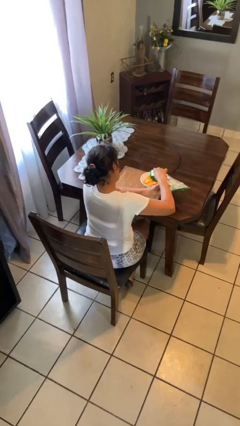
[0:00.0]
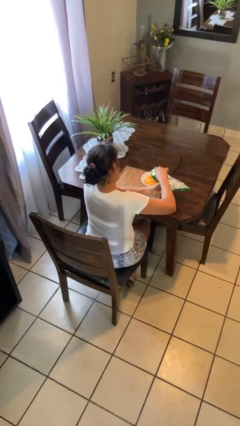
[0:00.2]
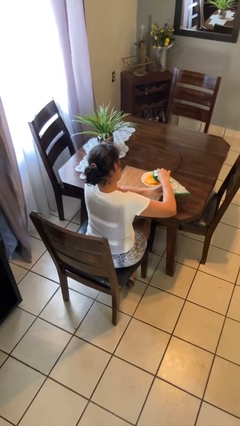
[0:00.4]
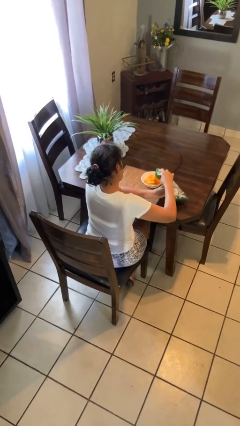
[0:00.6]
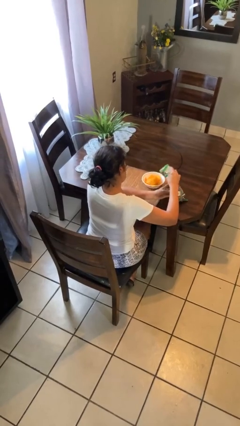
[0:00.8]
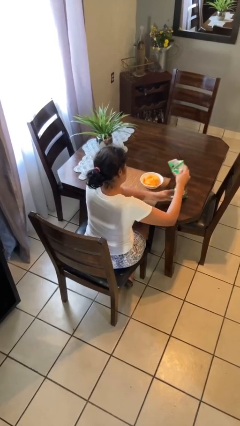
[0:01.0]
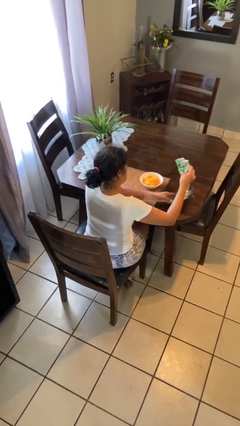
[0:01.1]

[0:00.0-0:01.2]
person pours into bowl

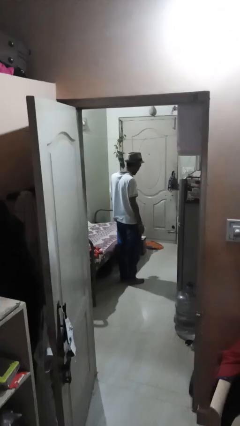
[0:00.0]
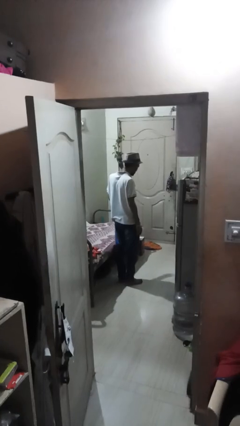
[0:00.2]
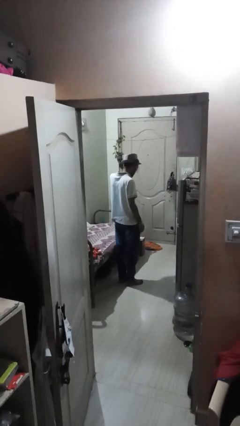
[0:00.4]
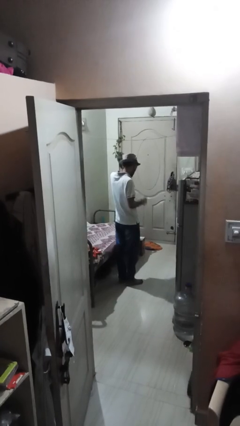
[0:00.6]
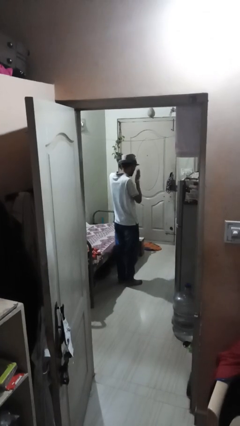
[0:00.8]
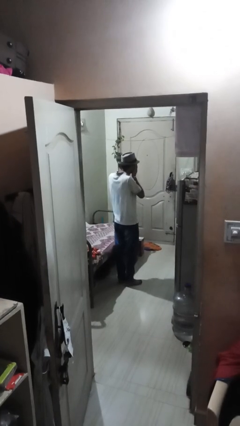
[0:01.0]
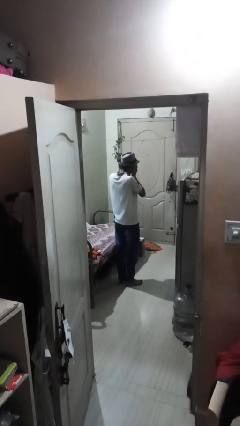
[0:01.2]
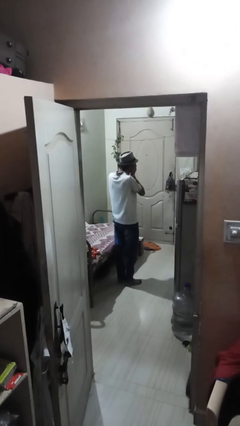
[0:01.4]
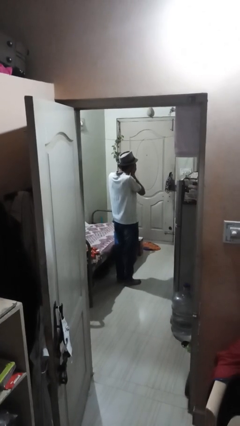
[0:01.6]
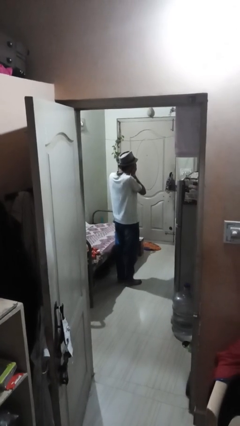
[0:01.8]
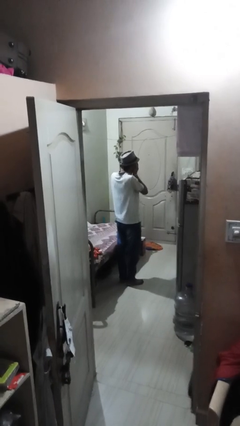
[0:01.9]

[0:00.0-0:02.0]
person covers face with hands

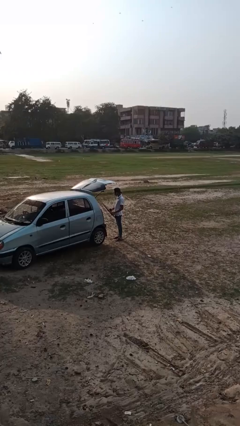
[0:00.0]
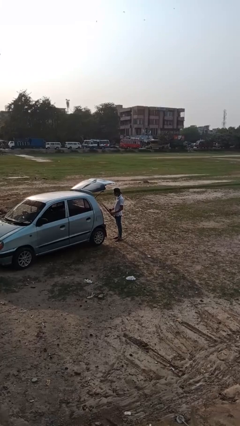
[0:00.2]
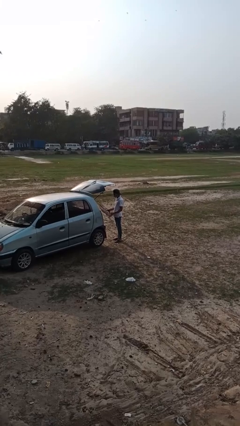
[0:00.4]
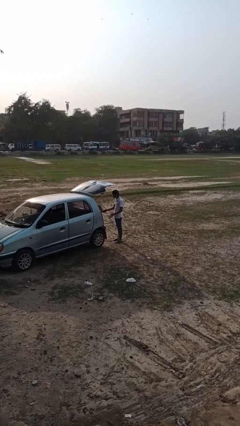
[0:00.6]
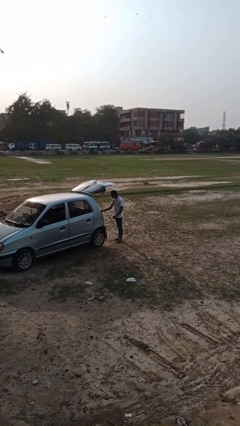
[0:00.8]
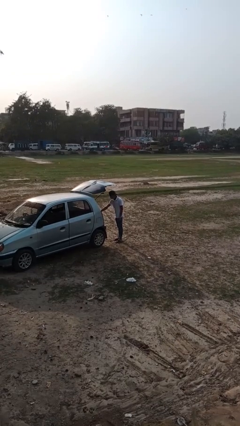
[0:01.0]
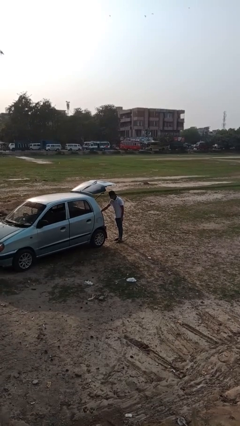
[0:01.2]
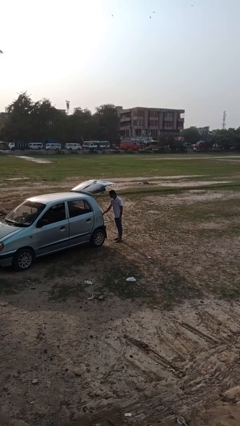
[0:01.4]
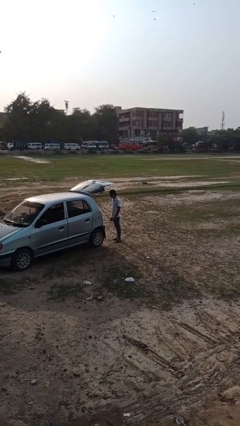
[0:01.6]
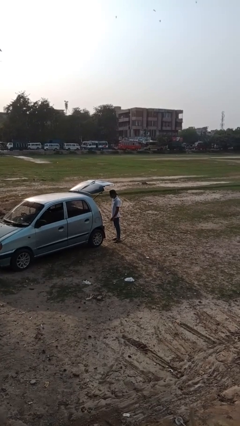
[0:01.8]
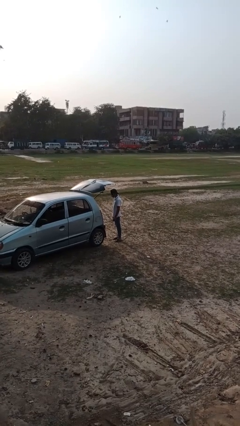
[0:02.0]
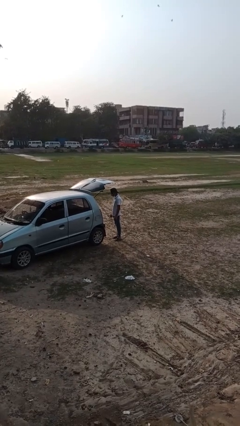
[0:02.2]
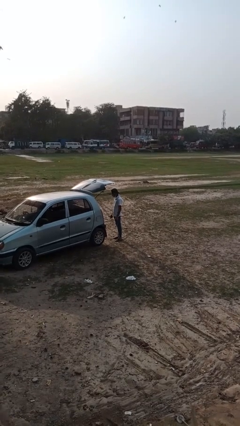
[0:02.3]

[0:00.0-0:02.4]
person loads car

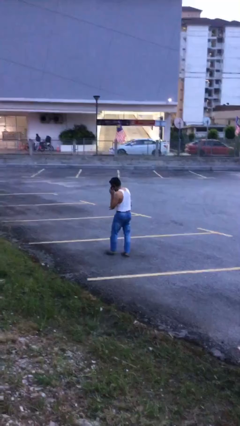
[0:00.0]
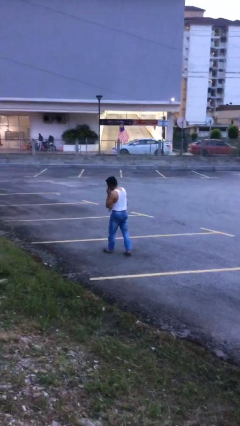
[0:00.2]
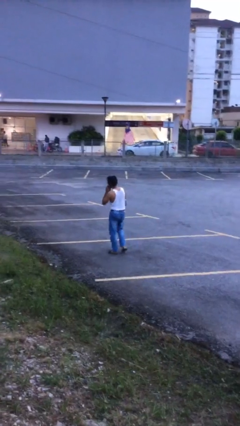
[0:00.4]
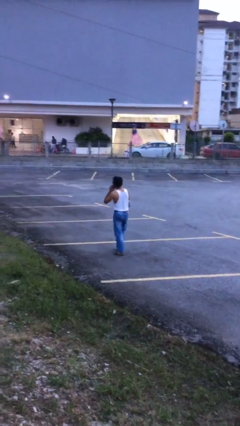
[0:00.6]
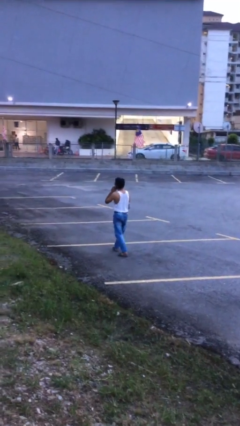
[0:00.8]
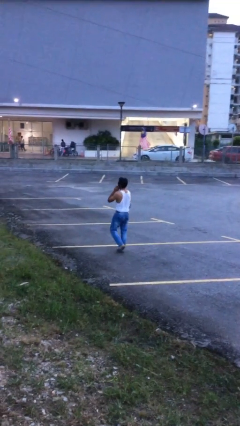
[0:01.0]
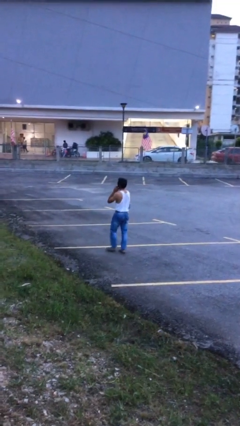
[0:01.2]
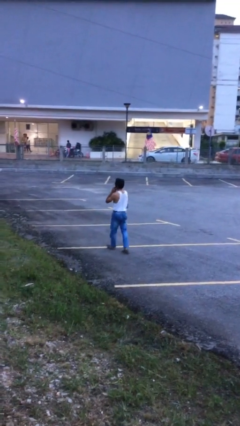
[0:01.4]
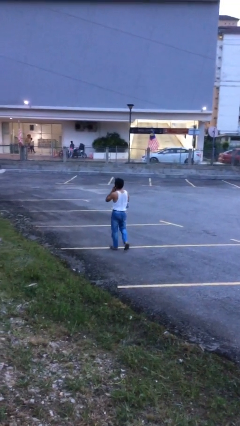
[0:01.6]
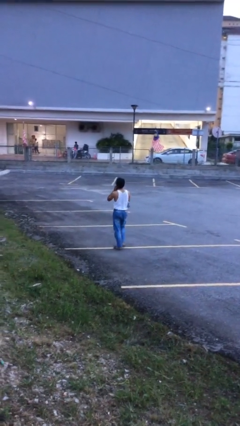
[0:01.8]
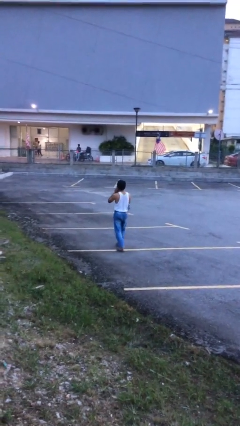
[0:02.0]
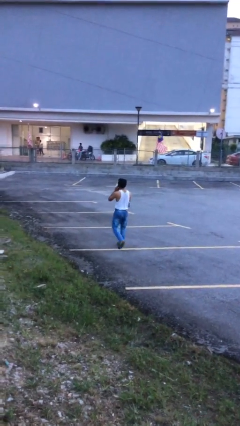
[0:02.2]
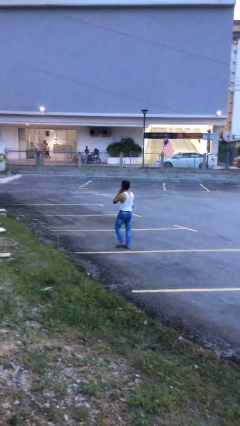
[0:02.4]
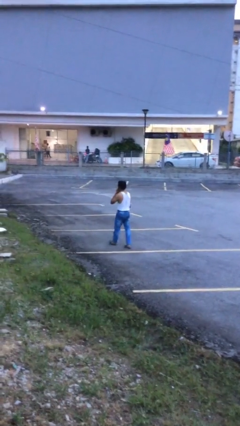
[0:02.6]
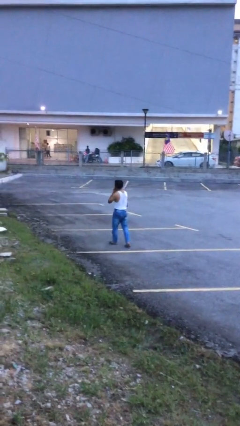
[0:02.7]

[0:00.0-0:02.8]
person talks on phone

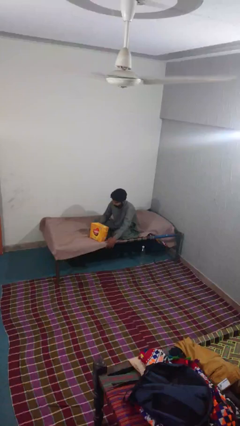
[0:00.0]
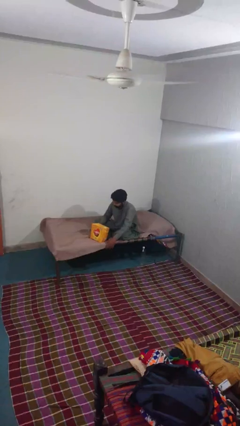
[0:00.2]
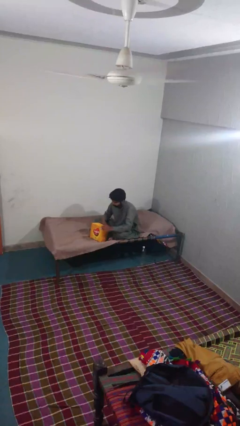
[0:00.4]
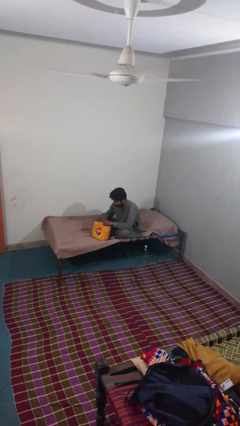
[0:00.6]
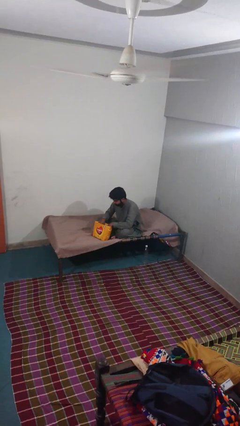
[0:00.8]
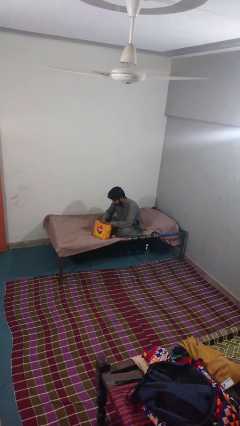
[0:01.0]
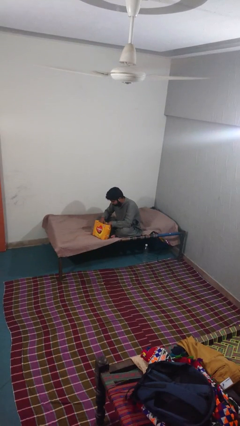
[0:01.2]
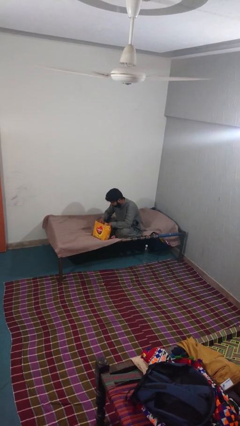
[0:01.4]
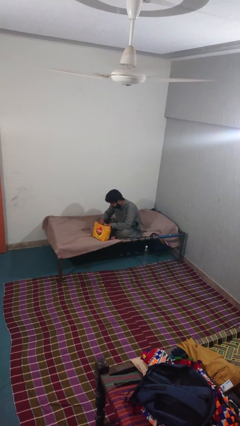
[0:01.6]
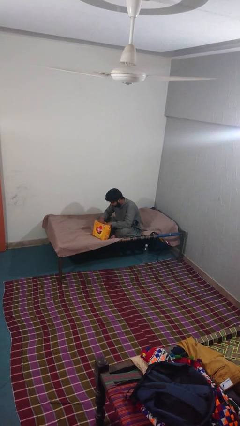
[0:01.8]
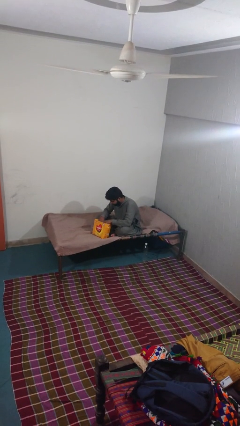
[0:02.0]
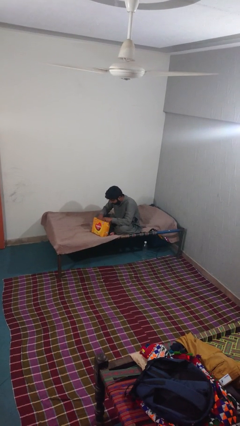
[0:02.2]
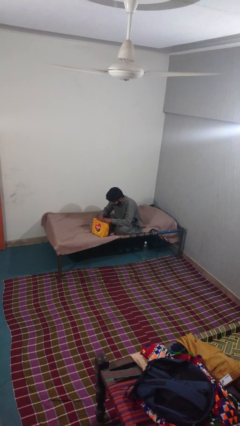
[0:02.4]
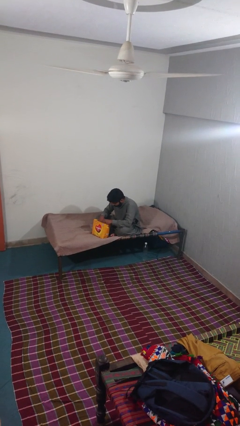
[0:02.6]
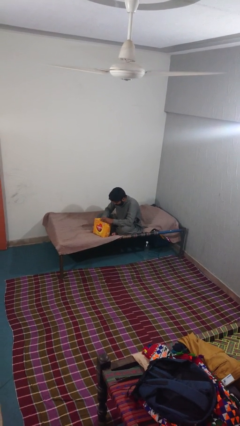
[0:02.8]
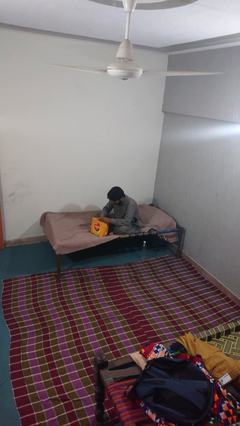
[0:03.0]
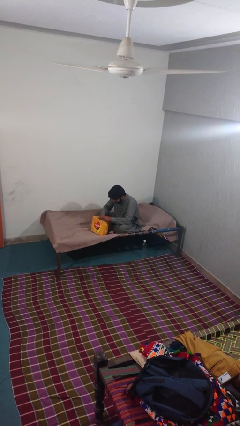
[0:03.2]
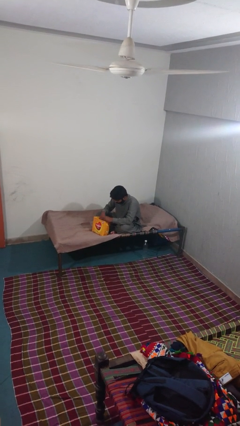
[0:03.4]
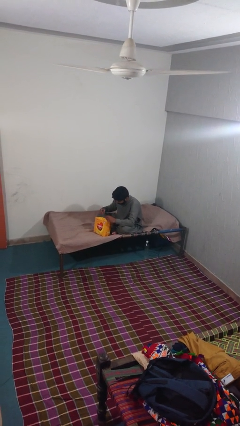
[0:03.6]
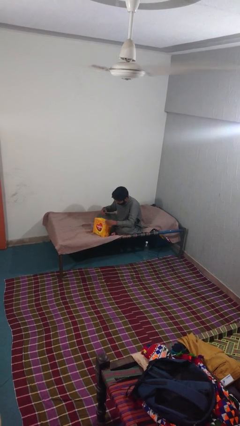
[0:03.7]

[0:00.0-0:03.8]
person searches in box

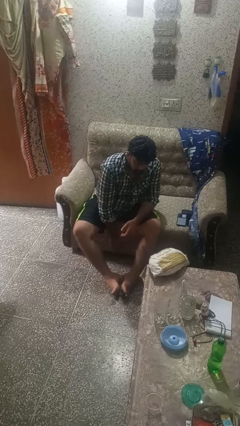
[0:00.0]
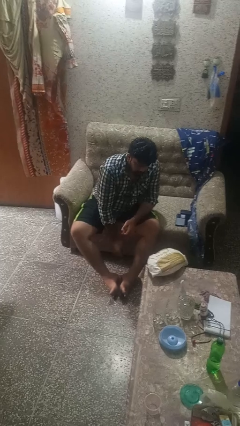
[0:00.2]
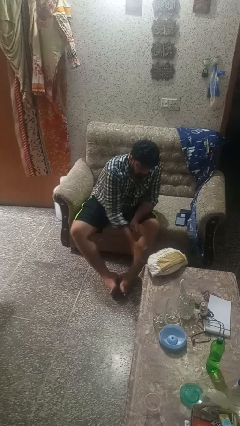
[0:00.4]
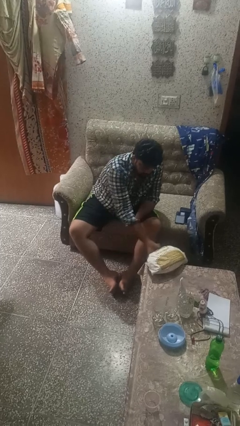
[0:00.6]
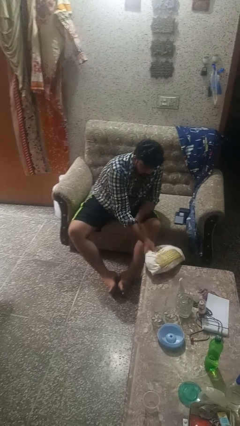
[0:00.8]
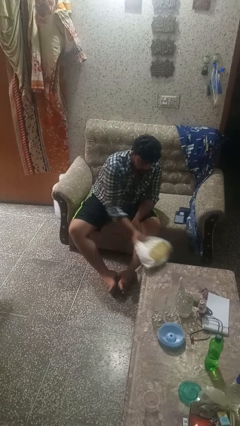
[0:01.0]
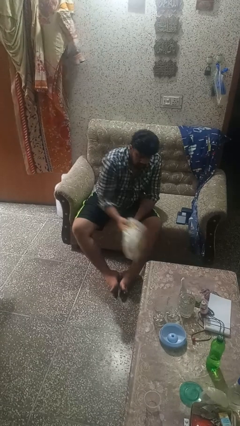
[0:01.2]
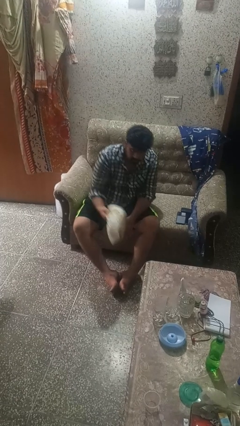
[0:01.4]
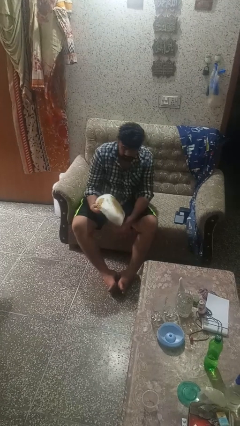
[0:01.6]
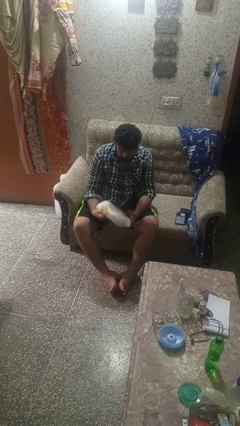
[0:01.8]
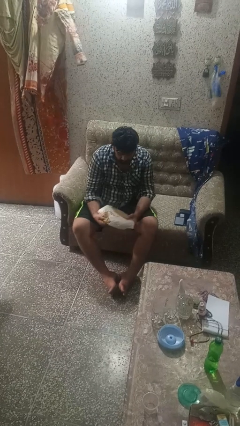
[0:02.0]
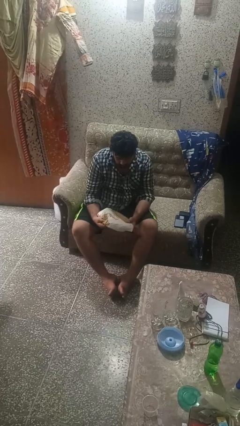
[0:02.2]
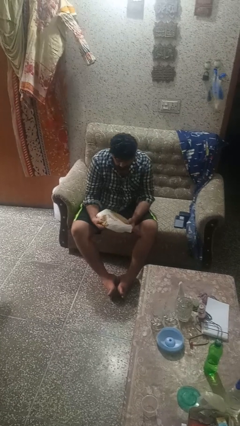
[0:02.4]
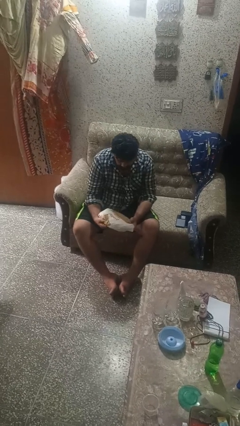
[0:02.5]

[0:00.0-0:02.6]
person picks up object from table

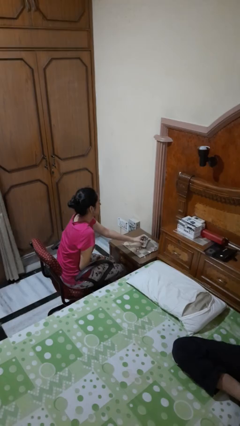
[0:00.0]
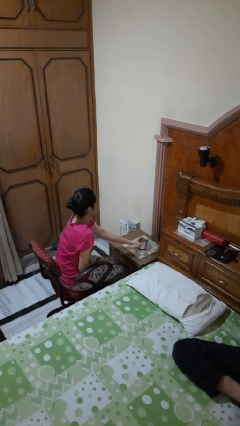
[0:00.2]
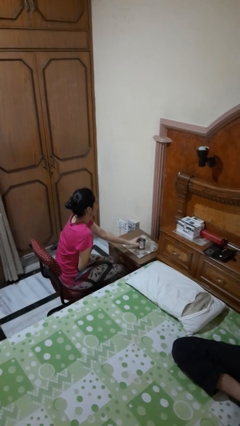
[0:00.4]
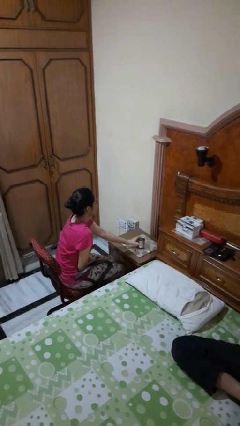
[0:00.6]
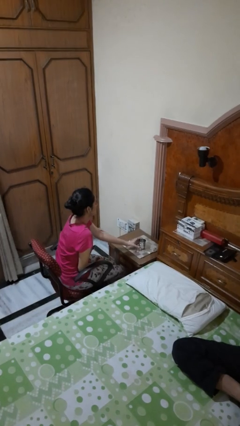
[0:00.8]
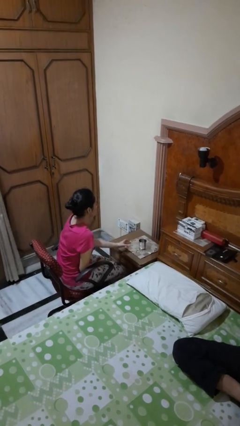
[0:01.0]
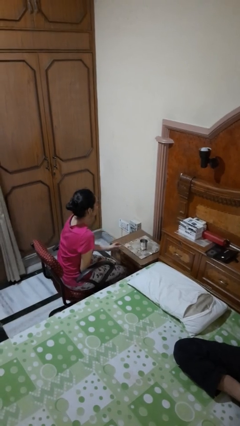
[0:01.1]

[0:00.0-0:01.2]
person sets upright glass

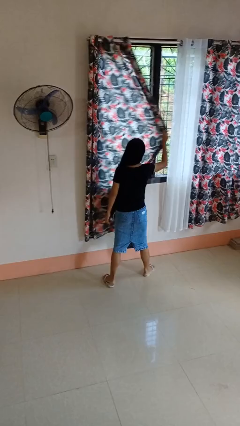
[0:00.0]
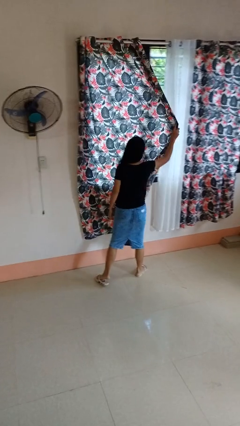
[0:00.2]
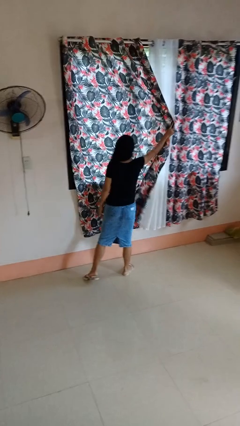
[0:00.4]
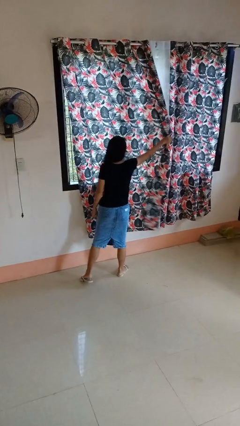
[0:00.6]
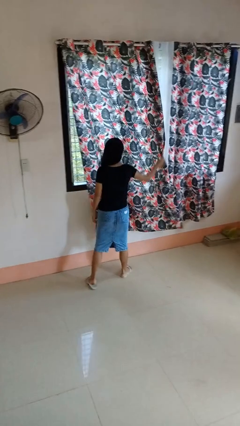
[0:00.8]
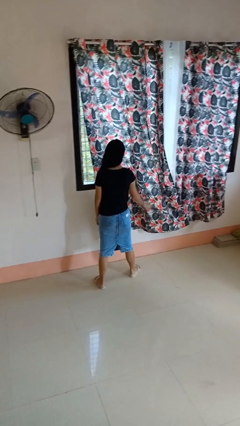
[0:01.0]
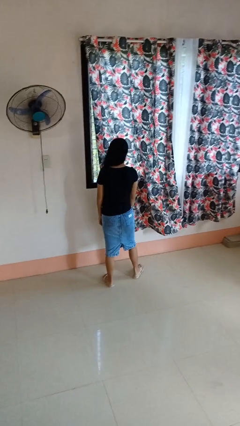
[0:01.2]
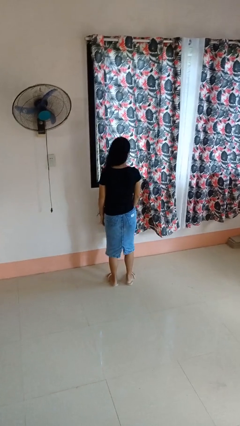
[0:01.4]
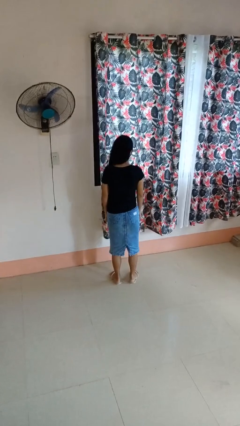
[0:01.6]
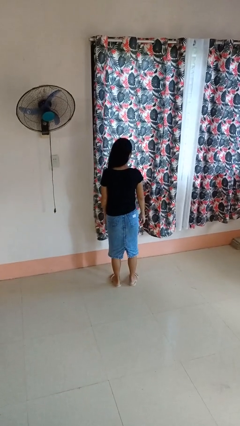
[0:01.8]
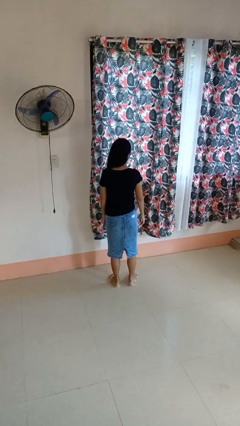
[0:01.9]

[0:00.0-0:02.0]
person closes curtains